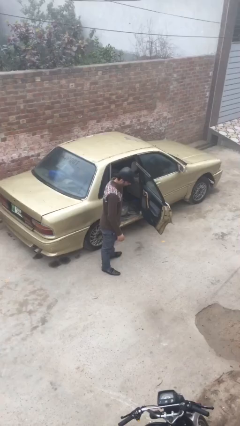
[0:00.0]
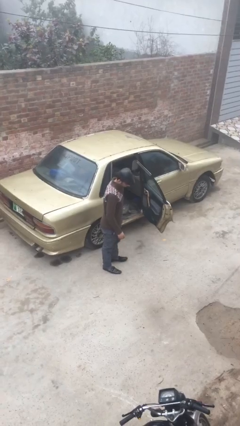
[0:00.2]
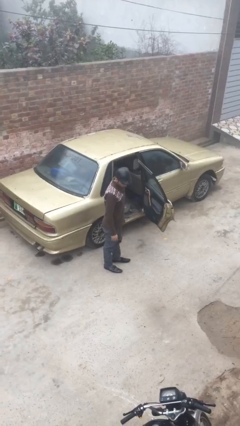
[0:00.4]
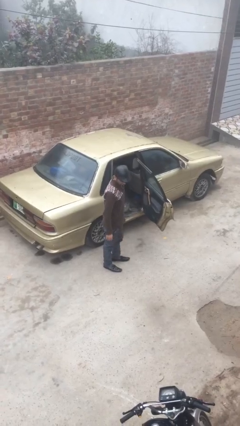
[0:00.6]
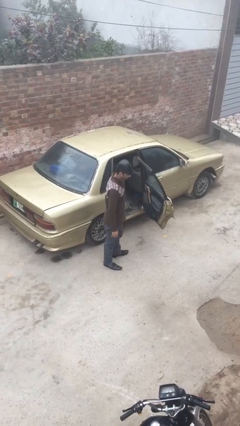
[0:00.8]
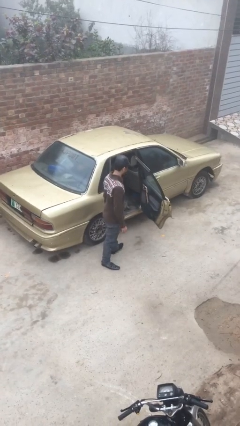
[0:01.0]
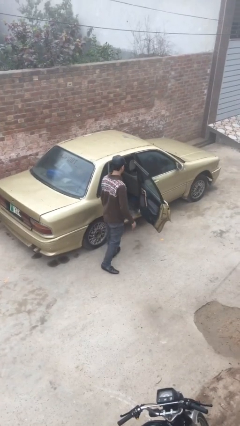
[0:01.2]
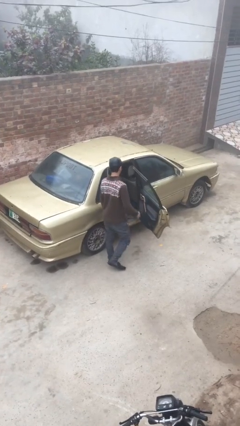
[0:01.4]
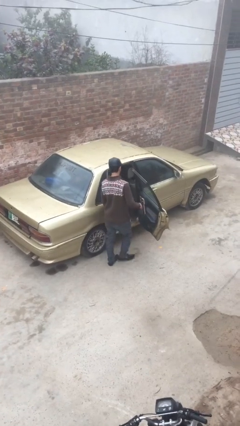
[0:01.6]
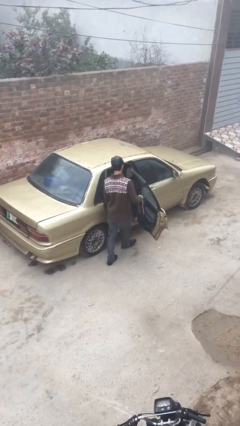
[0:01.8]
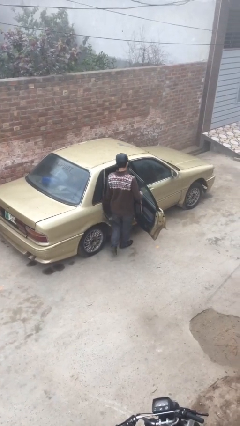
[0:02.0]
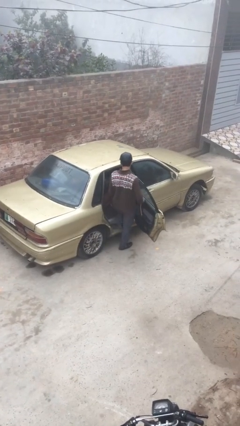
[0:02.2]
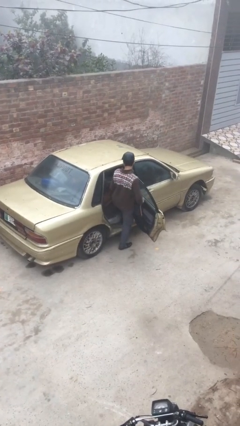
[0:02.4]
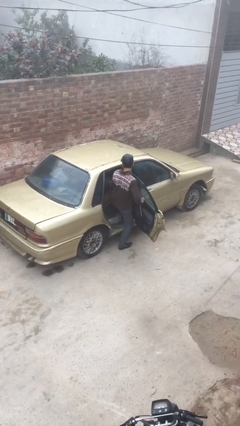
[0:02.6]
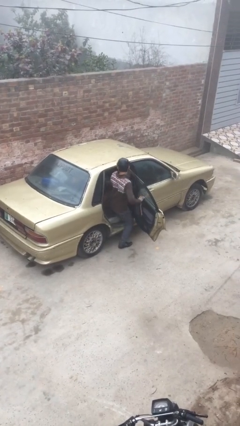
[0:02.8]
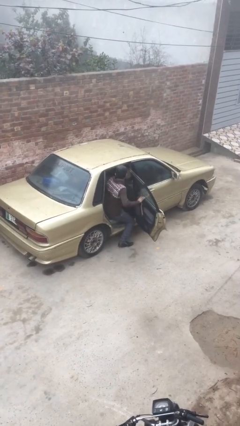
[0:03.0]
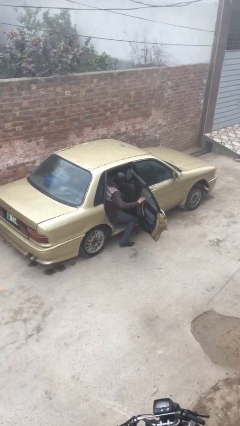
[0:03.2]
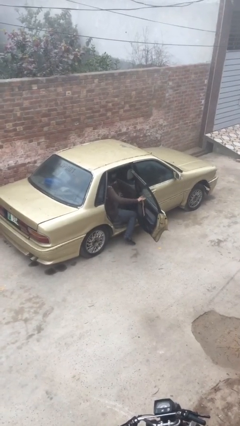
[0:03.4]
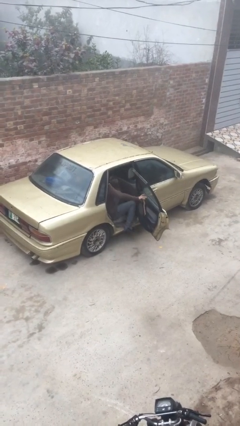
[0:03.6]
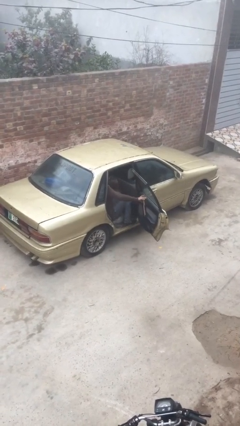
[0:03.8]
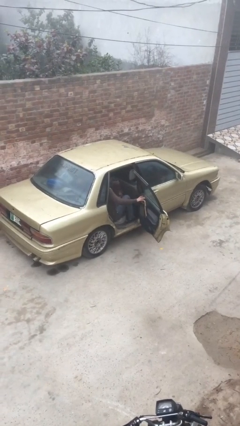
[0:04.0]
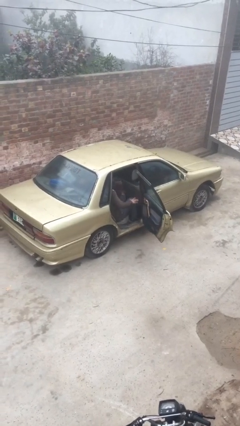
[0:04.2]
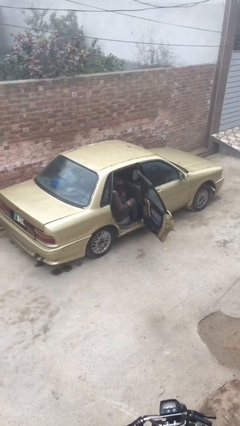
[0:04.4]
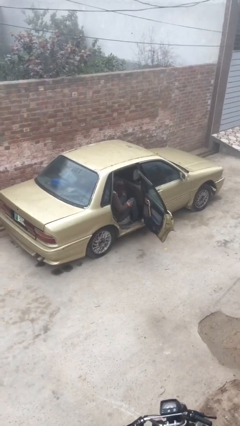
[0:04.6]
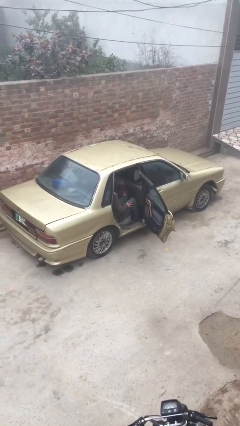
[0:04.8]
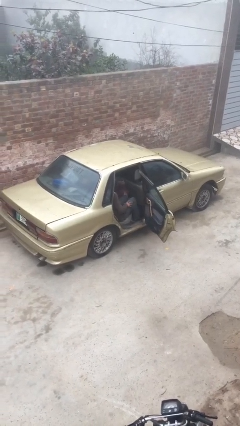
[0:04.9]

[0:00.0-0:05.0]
person enters car

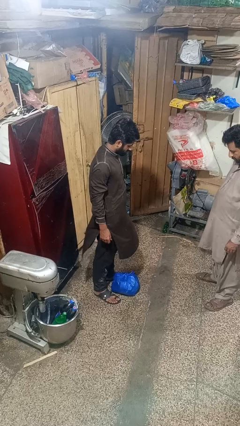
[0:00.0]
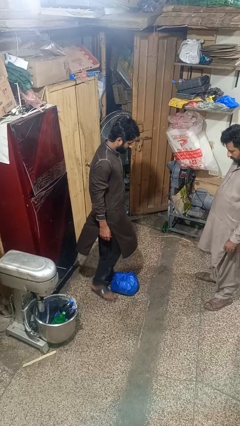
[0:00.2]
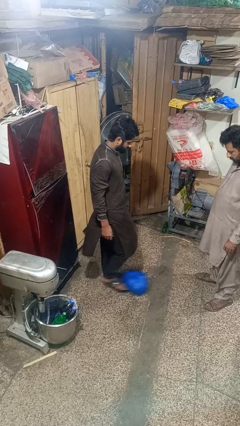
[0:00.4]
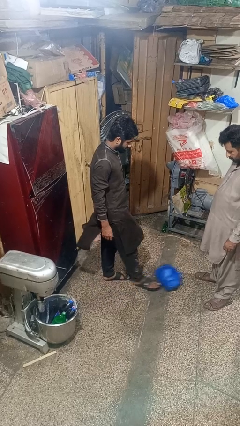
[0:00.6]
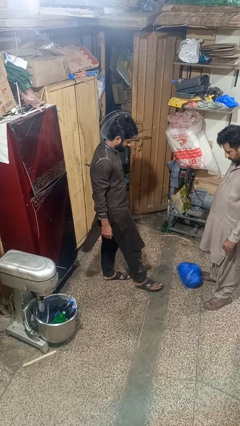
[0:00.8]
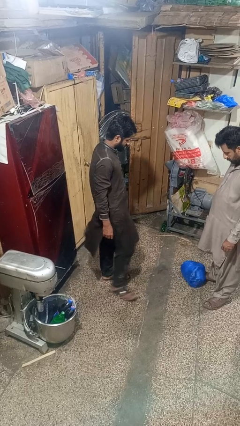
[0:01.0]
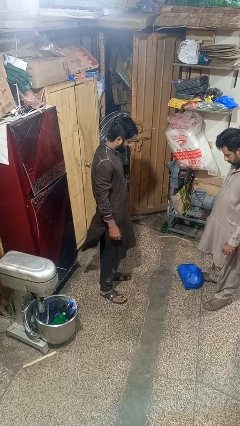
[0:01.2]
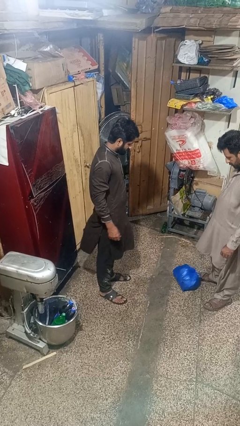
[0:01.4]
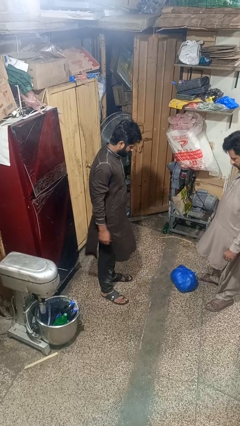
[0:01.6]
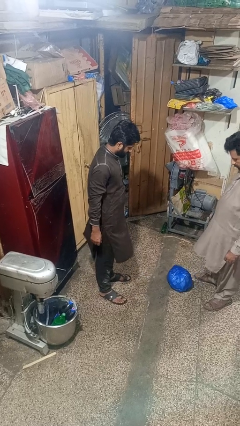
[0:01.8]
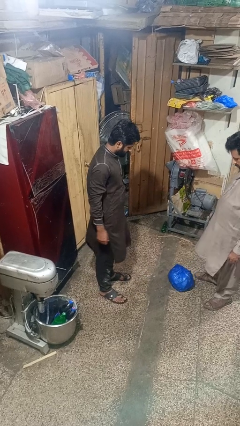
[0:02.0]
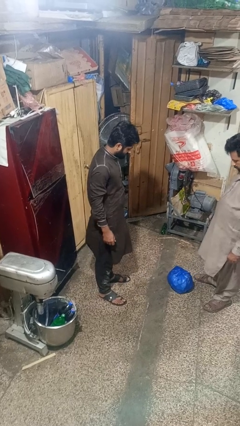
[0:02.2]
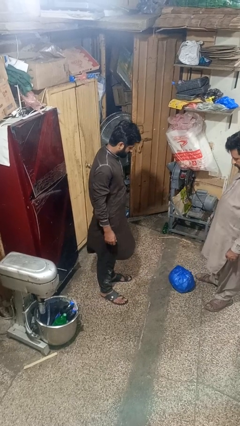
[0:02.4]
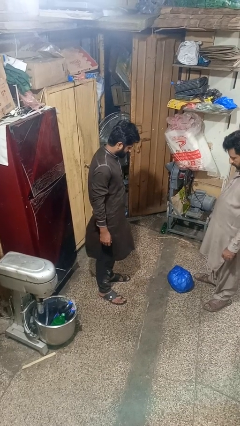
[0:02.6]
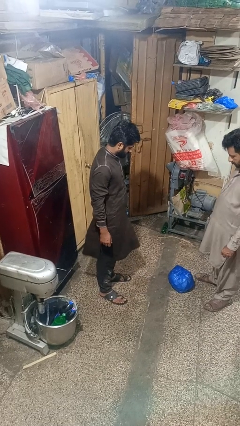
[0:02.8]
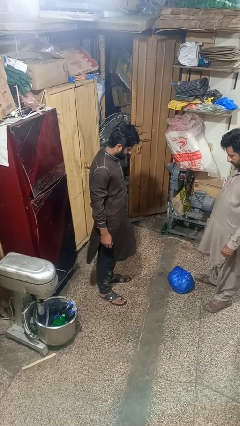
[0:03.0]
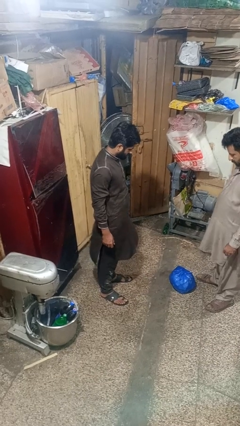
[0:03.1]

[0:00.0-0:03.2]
person kicks object to person

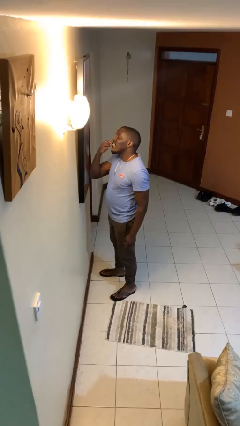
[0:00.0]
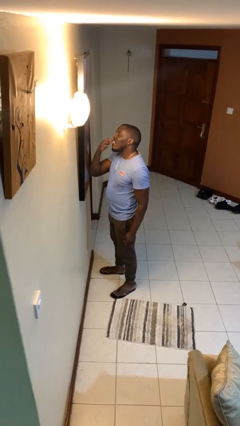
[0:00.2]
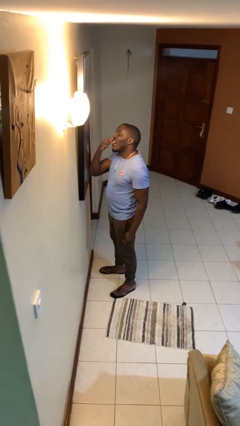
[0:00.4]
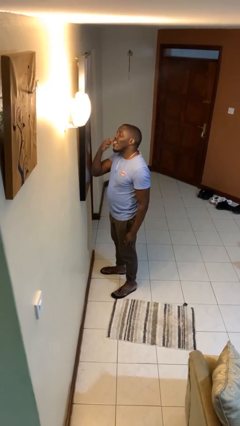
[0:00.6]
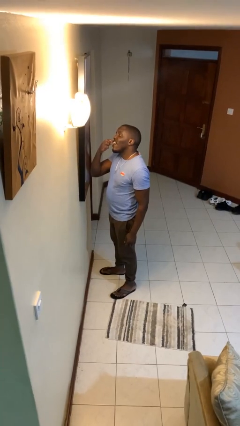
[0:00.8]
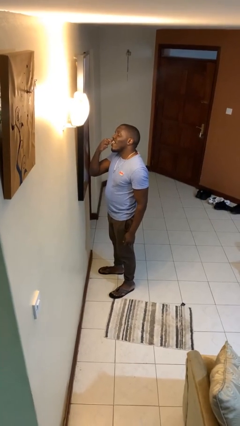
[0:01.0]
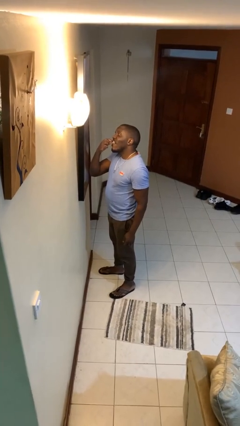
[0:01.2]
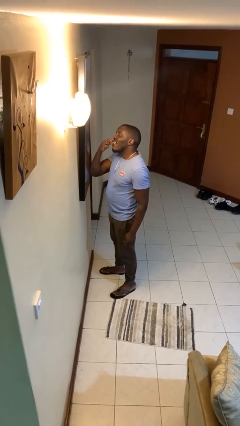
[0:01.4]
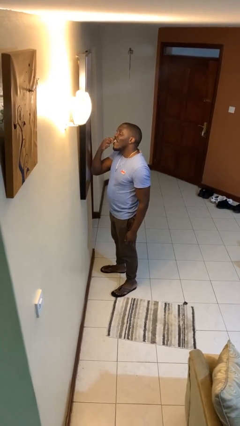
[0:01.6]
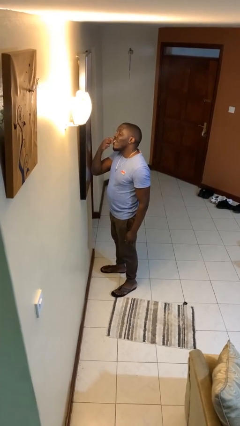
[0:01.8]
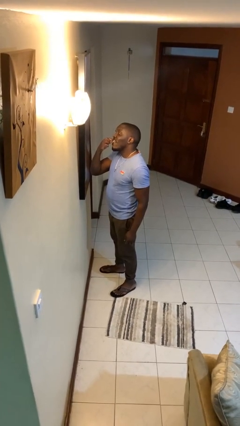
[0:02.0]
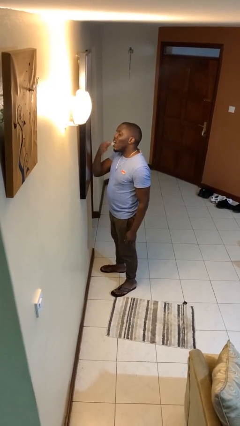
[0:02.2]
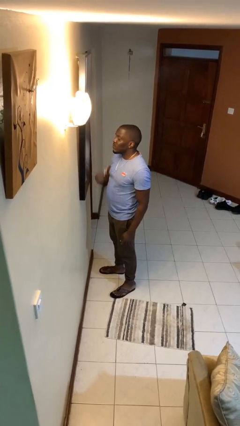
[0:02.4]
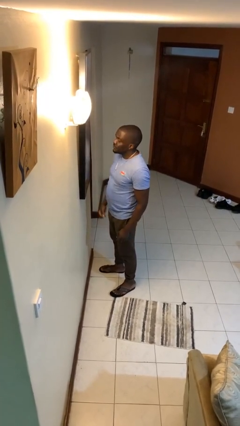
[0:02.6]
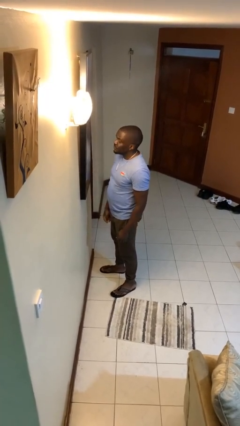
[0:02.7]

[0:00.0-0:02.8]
person flosses

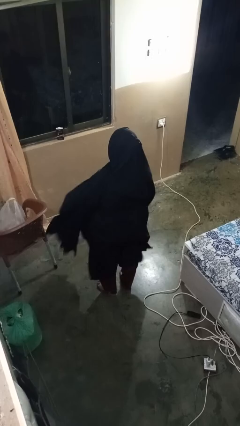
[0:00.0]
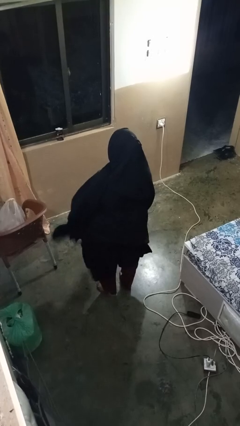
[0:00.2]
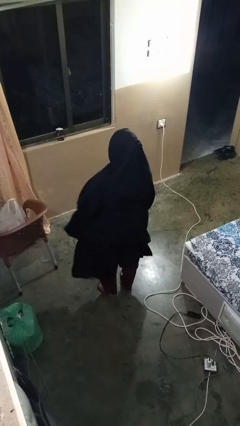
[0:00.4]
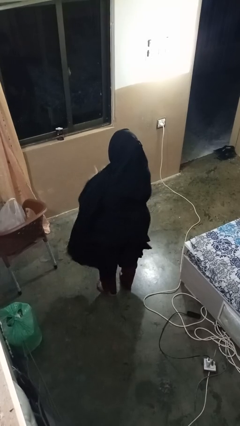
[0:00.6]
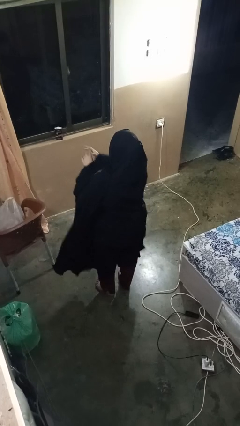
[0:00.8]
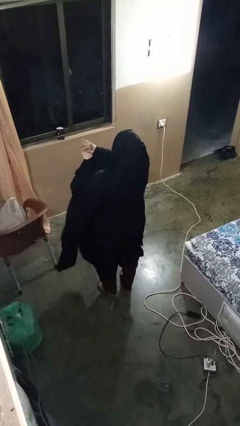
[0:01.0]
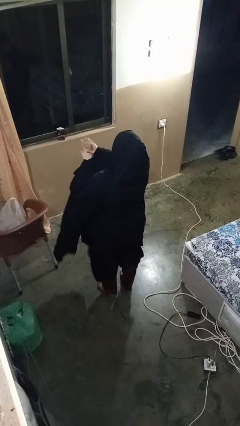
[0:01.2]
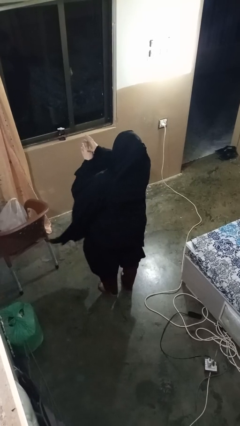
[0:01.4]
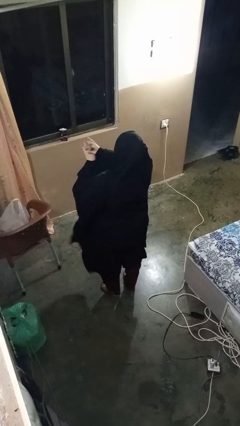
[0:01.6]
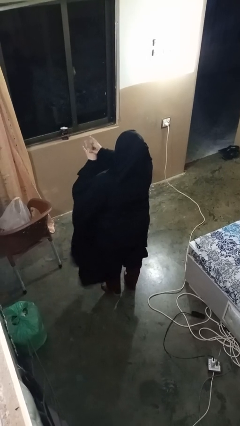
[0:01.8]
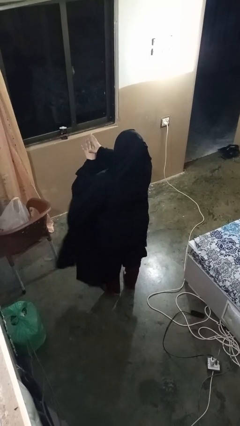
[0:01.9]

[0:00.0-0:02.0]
person cracks knuckles

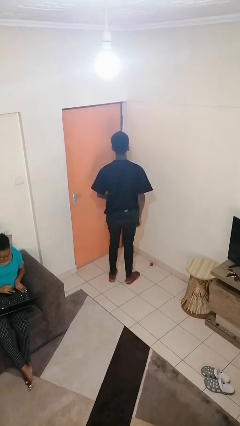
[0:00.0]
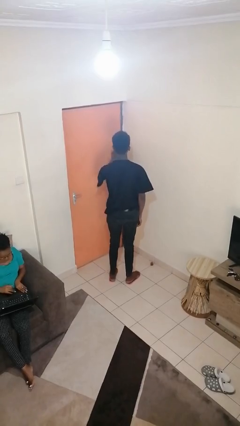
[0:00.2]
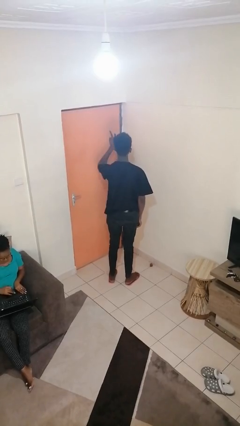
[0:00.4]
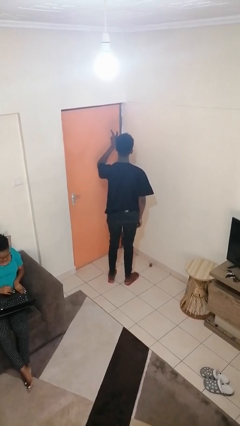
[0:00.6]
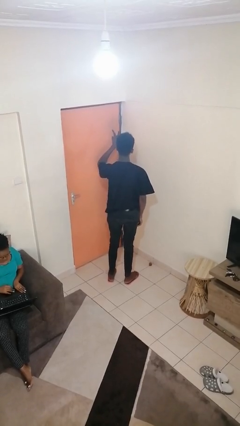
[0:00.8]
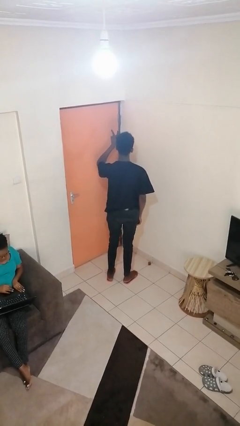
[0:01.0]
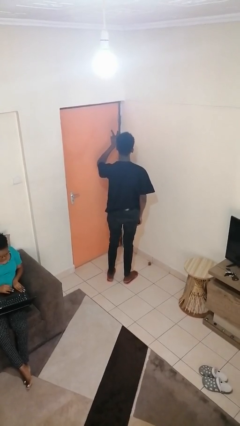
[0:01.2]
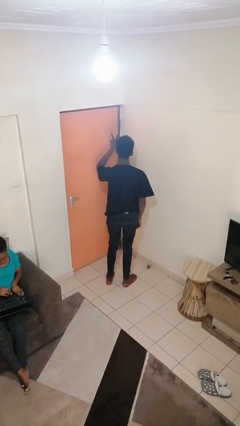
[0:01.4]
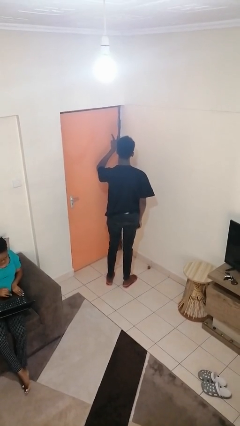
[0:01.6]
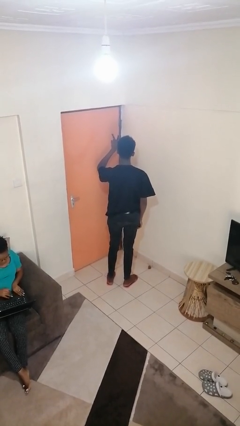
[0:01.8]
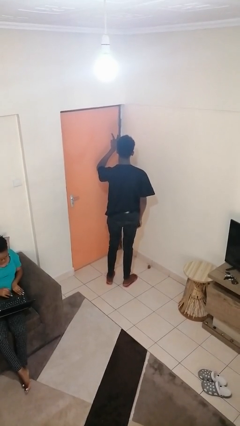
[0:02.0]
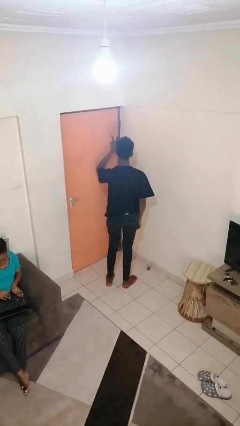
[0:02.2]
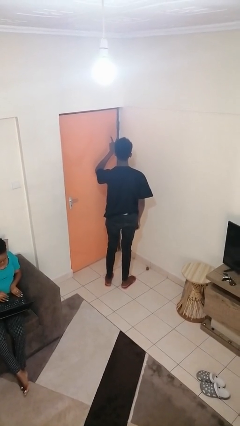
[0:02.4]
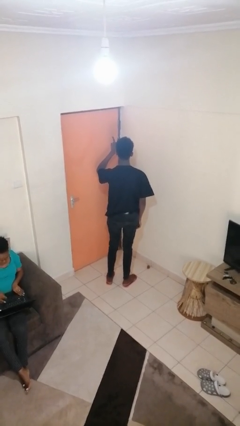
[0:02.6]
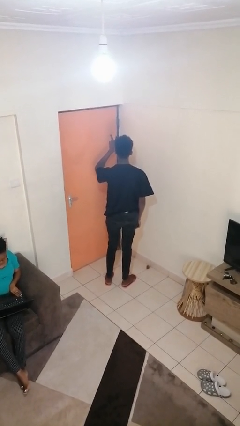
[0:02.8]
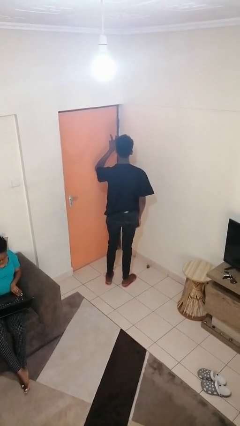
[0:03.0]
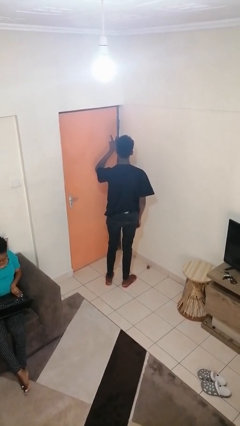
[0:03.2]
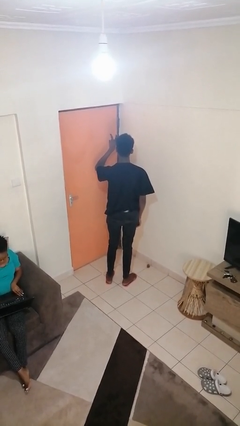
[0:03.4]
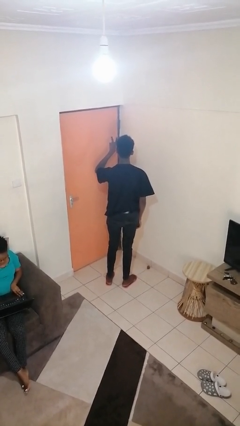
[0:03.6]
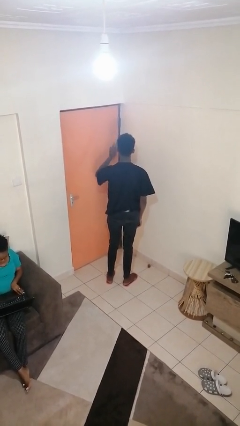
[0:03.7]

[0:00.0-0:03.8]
person gestures peace

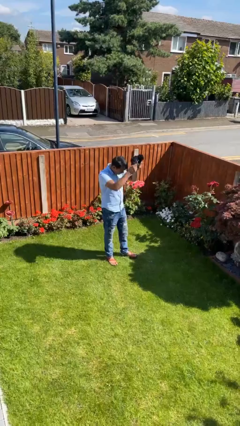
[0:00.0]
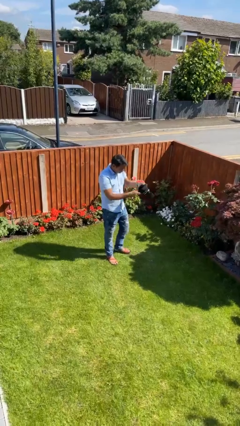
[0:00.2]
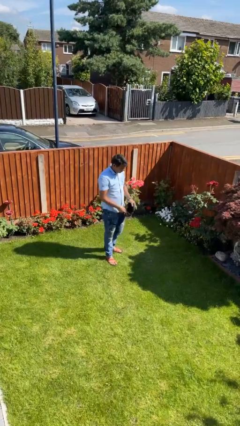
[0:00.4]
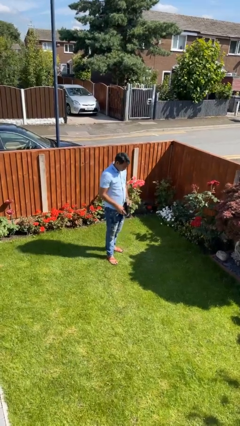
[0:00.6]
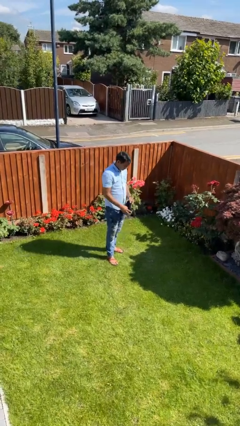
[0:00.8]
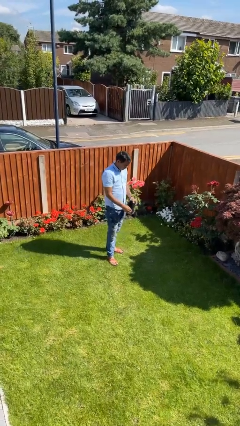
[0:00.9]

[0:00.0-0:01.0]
person takes off hat
